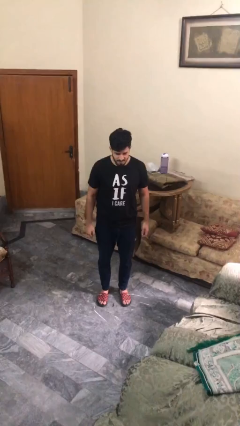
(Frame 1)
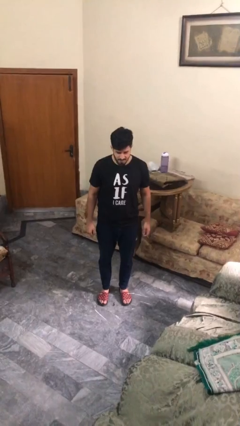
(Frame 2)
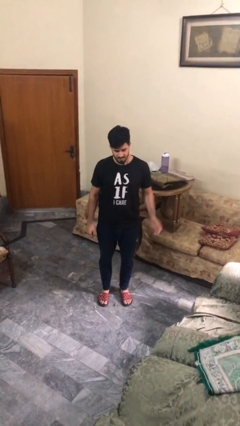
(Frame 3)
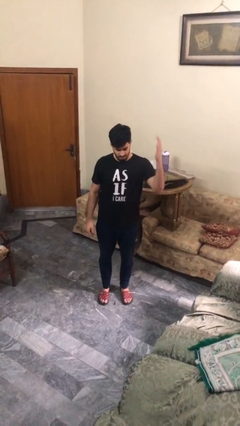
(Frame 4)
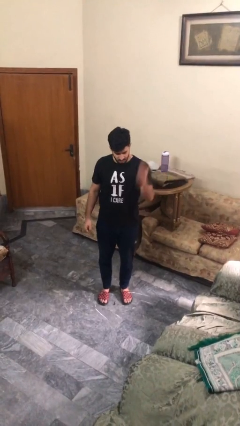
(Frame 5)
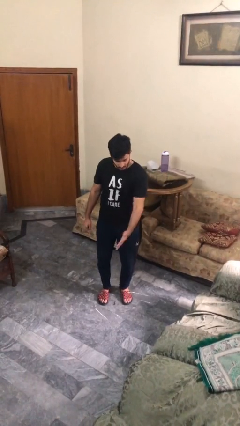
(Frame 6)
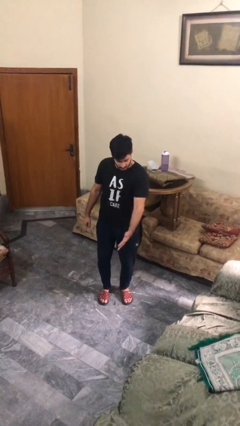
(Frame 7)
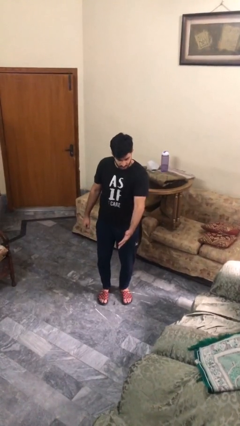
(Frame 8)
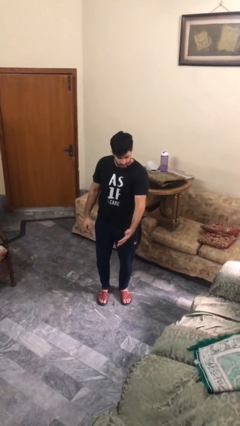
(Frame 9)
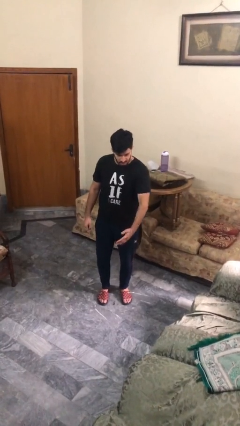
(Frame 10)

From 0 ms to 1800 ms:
person karate chop

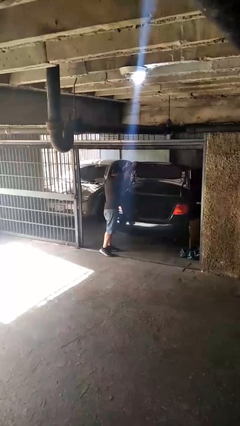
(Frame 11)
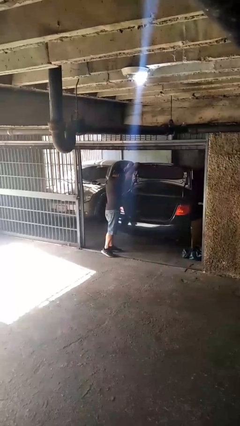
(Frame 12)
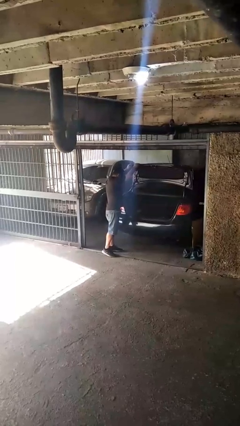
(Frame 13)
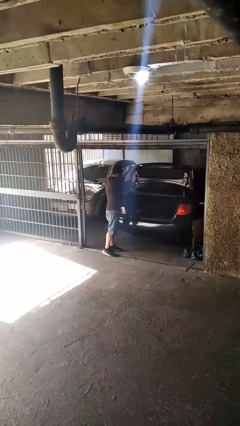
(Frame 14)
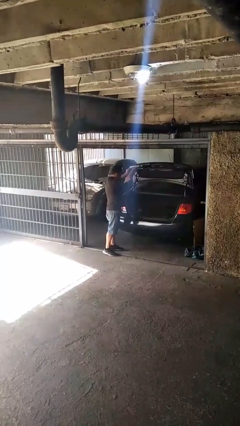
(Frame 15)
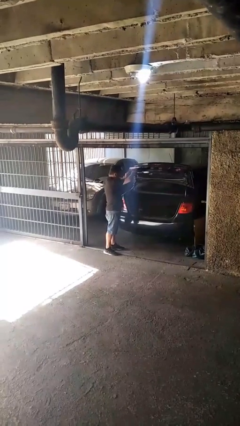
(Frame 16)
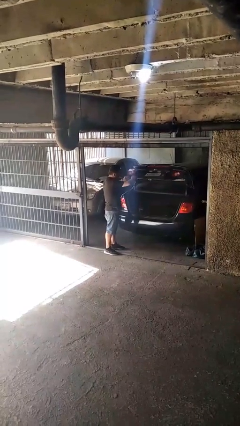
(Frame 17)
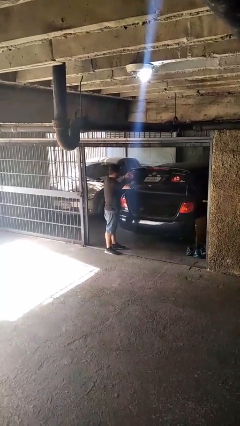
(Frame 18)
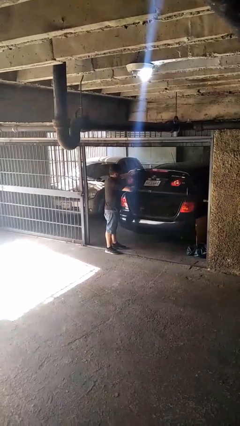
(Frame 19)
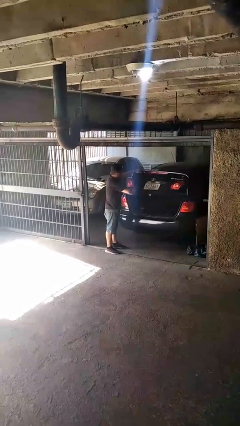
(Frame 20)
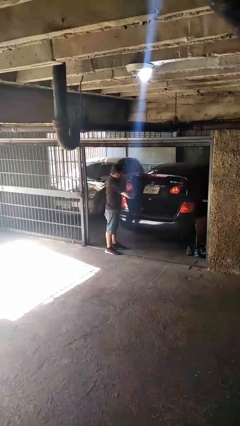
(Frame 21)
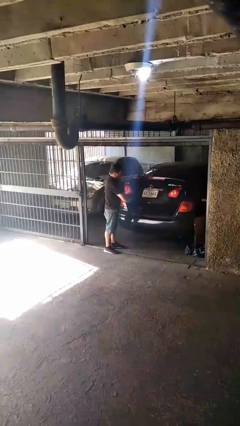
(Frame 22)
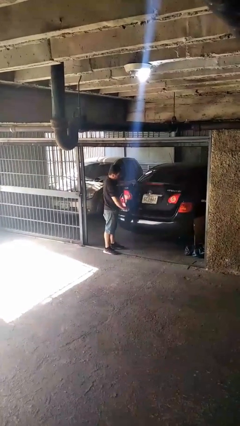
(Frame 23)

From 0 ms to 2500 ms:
person closes car trunk

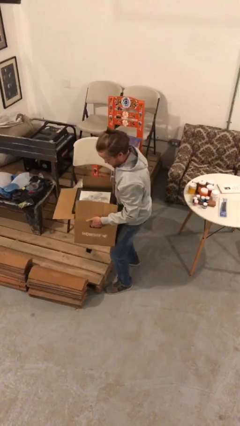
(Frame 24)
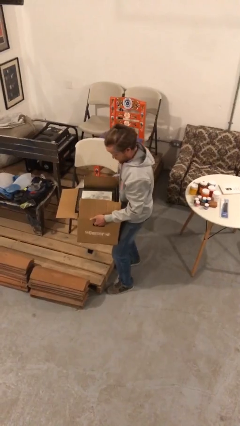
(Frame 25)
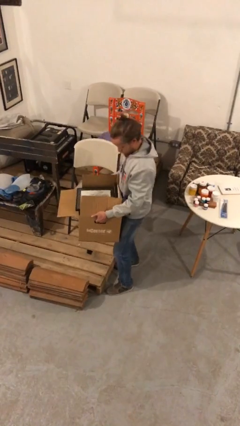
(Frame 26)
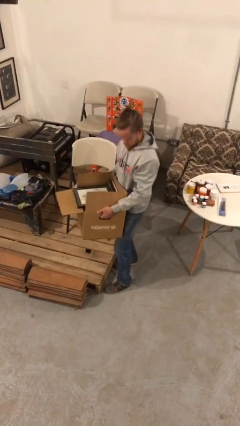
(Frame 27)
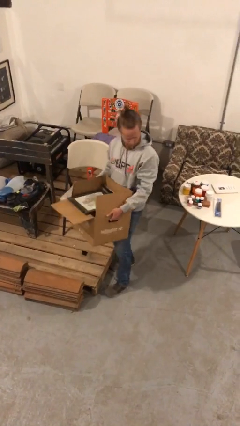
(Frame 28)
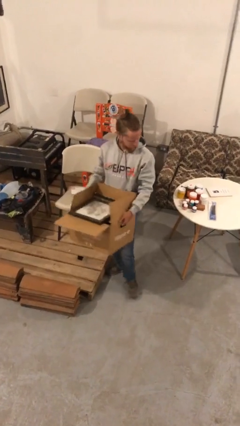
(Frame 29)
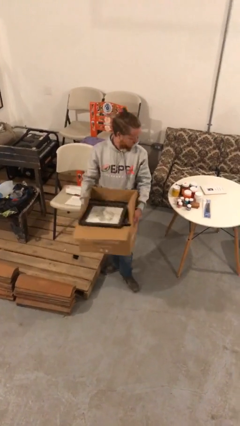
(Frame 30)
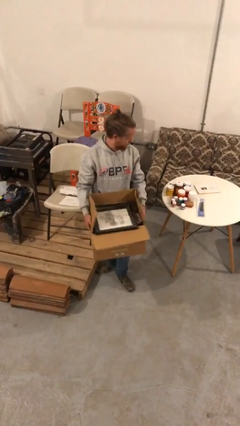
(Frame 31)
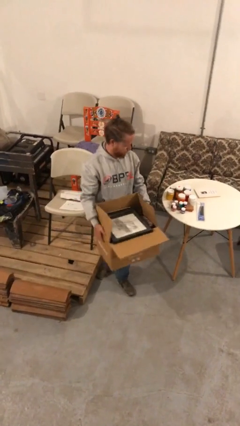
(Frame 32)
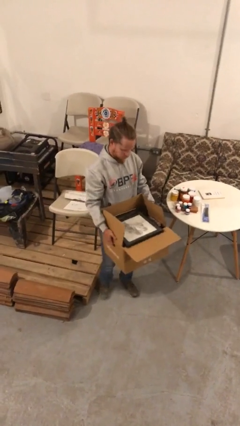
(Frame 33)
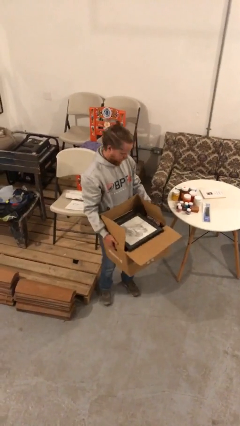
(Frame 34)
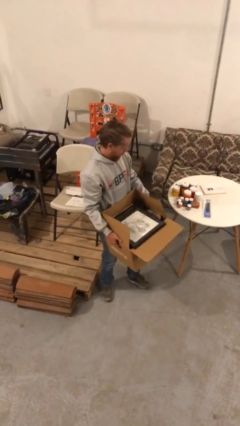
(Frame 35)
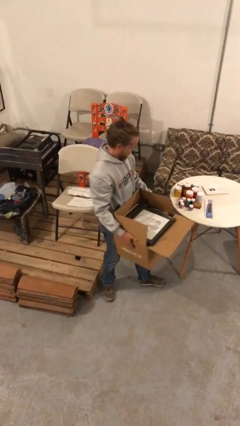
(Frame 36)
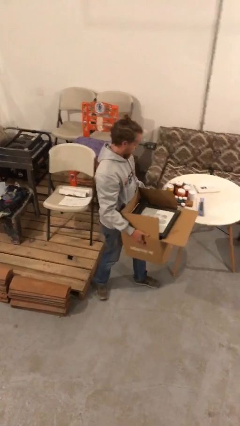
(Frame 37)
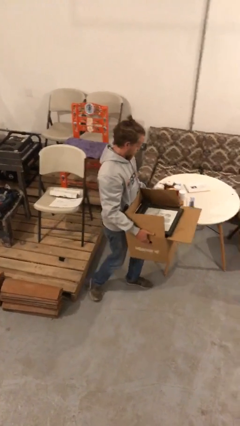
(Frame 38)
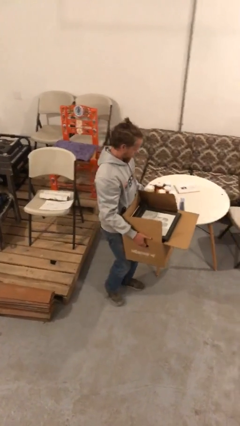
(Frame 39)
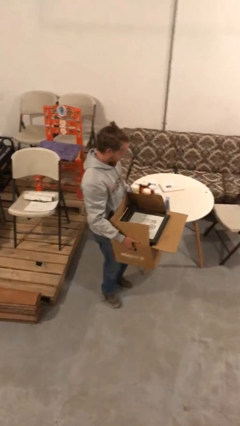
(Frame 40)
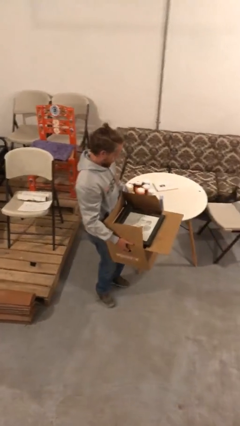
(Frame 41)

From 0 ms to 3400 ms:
person carries heavy object

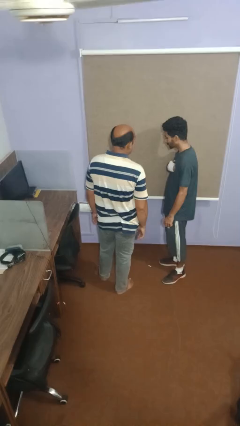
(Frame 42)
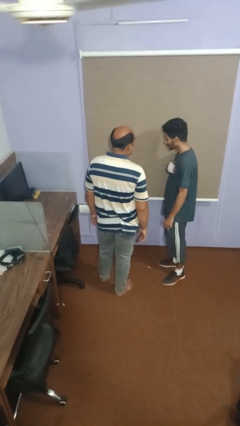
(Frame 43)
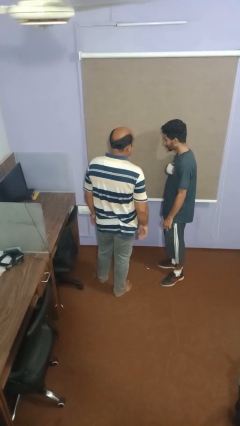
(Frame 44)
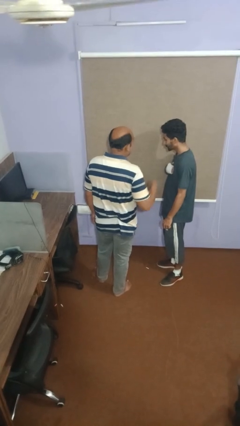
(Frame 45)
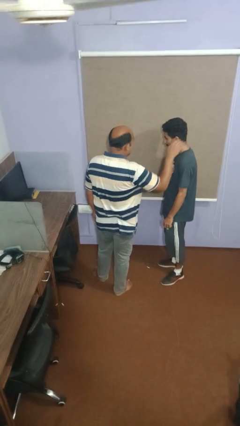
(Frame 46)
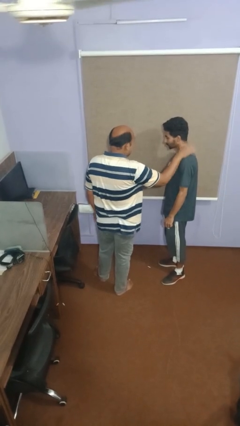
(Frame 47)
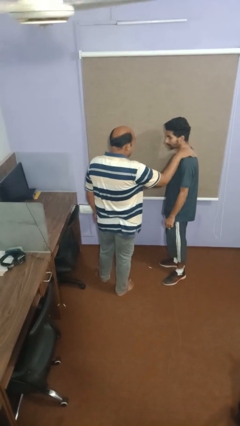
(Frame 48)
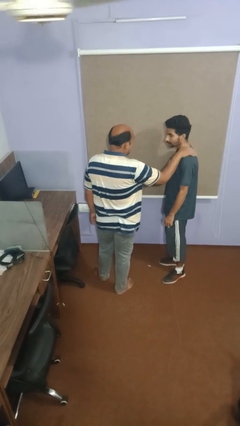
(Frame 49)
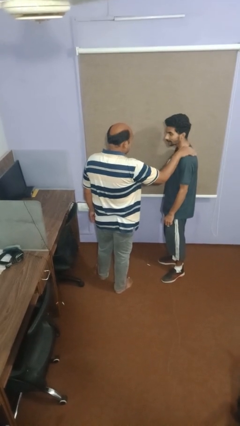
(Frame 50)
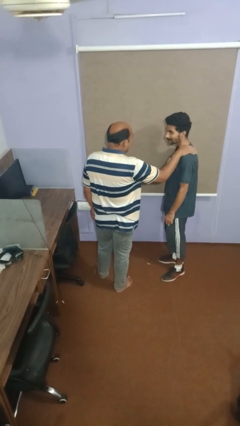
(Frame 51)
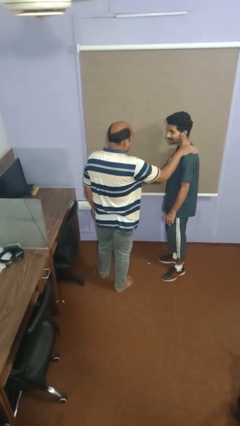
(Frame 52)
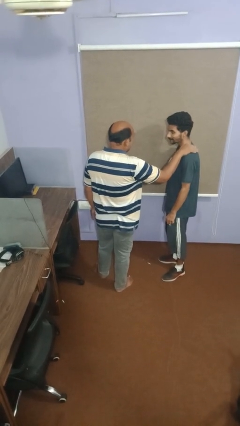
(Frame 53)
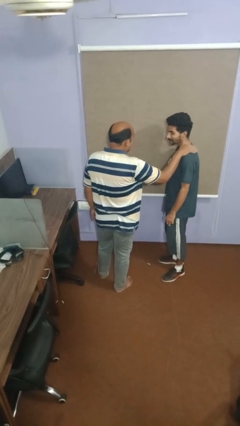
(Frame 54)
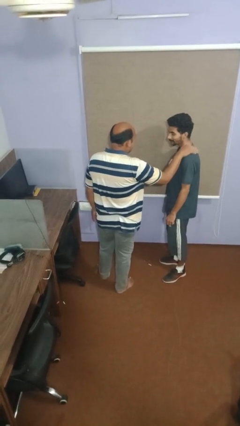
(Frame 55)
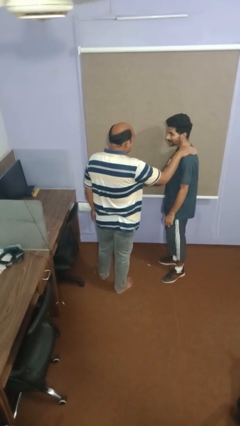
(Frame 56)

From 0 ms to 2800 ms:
person pounds shoulders of person

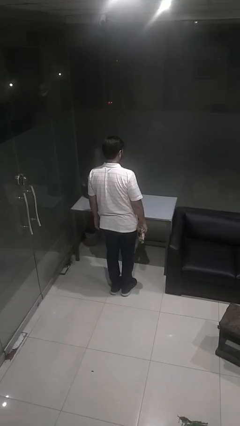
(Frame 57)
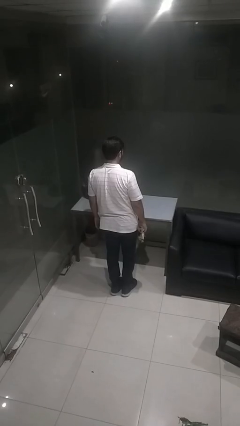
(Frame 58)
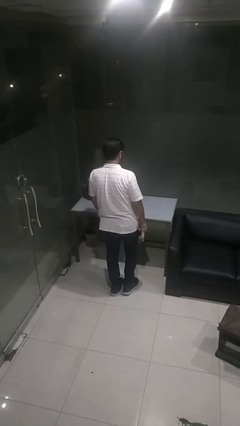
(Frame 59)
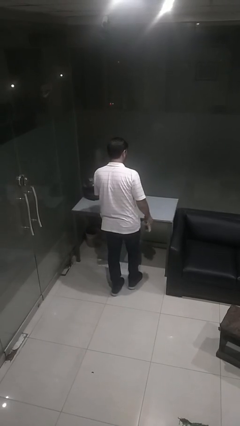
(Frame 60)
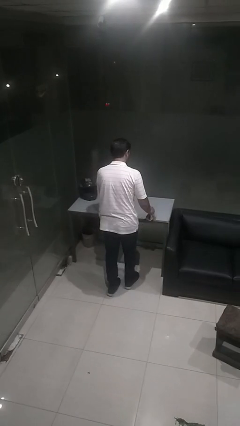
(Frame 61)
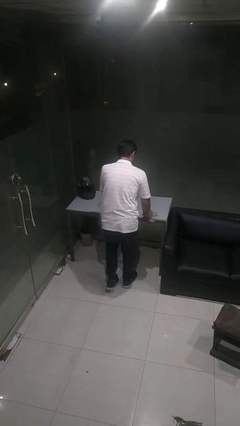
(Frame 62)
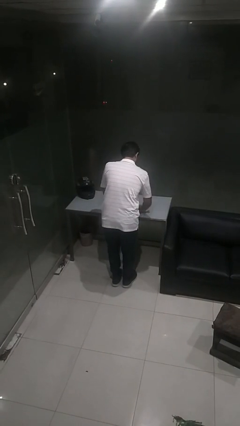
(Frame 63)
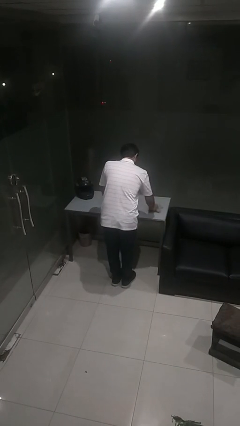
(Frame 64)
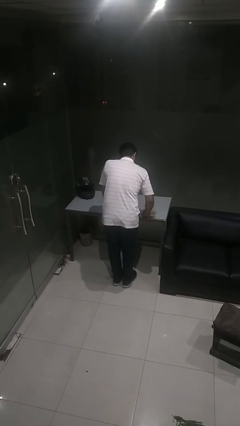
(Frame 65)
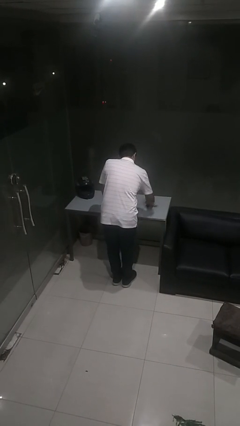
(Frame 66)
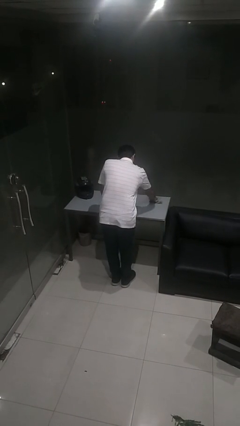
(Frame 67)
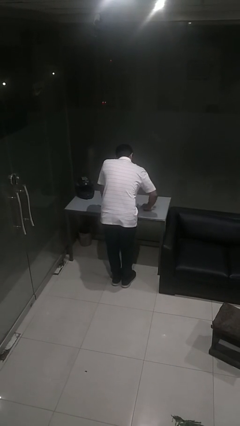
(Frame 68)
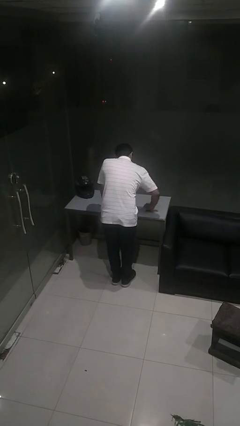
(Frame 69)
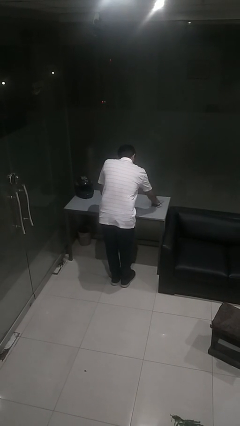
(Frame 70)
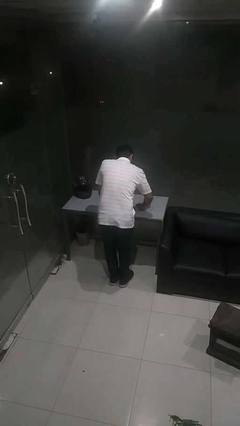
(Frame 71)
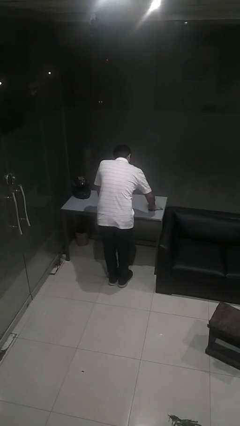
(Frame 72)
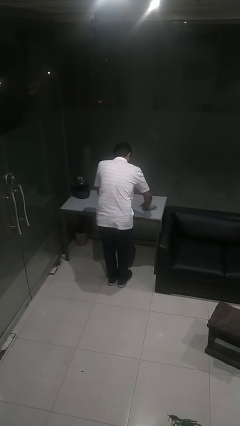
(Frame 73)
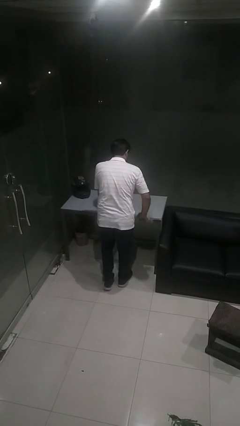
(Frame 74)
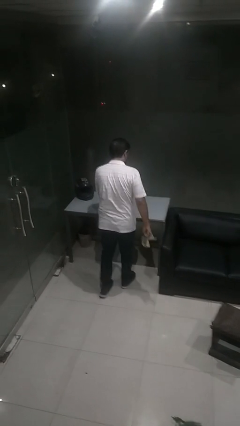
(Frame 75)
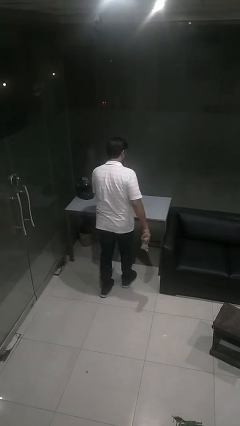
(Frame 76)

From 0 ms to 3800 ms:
person cleans table with rag

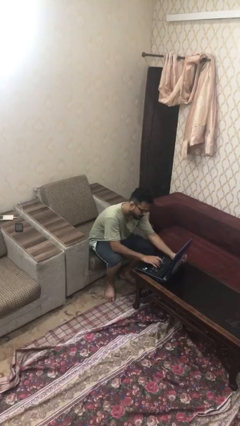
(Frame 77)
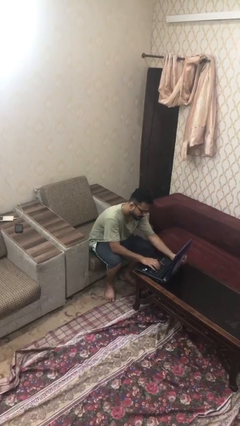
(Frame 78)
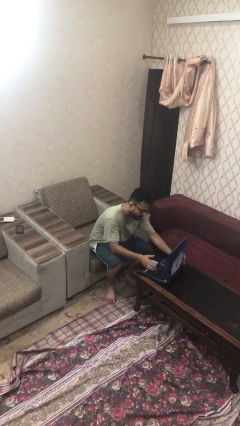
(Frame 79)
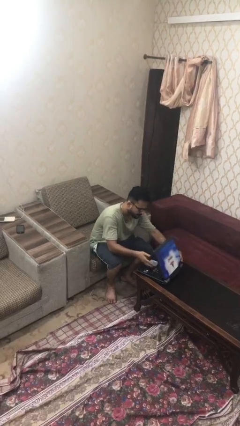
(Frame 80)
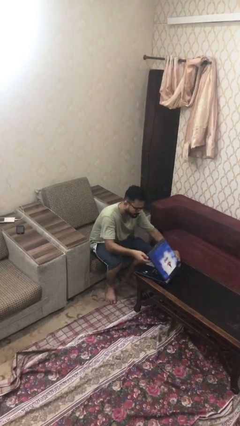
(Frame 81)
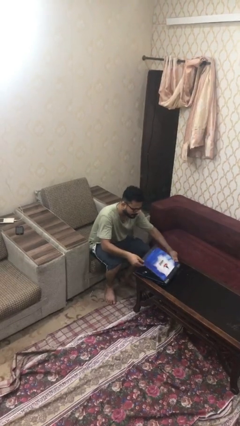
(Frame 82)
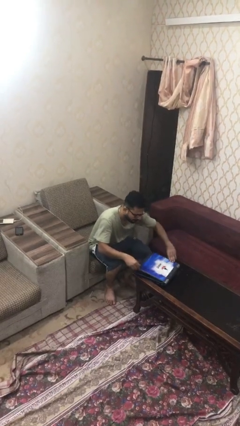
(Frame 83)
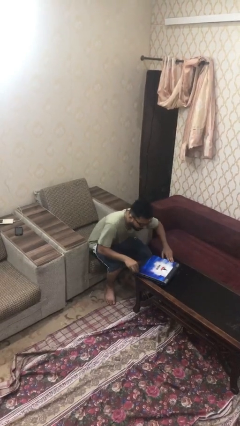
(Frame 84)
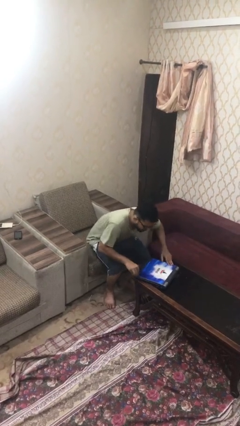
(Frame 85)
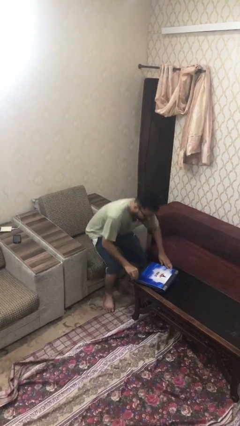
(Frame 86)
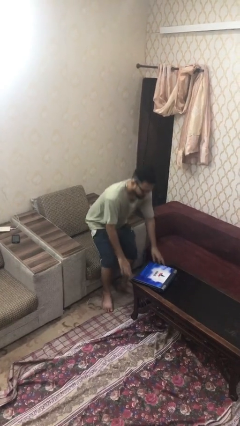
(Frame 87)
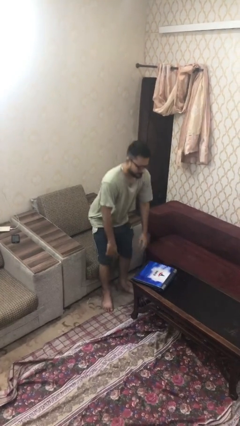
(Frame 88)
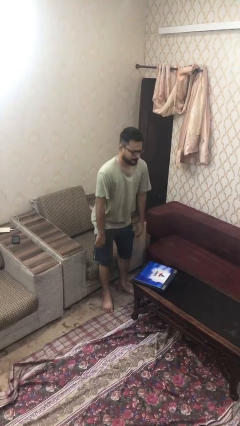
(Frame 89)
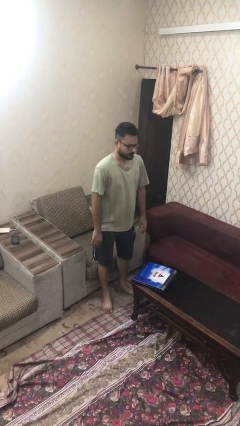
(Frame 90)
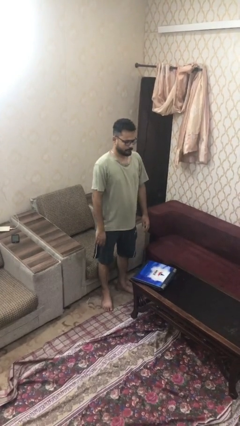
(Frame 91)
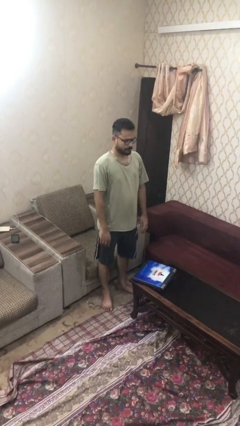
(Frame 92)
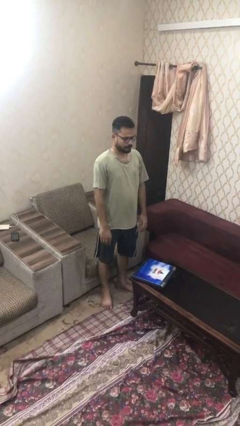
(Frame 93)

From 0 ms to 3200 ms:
person stands up

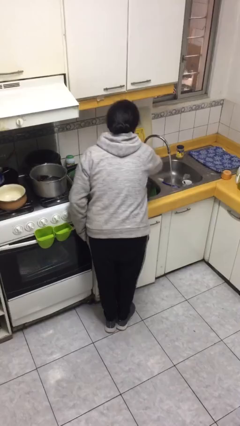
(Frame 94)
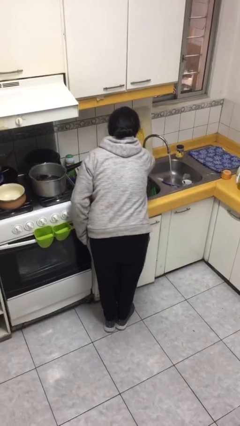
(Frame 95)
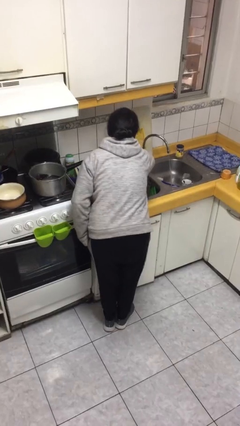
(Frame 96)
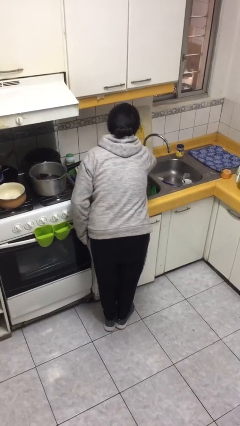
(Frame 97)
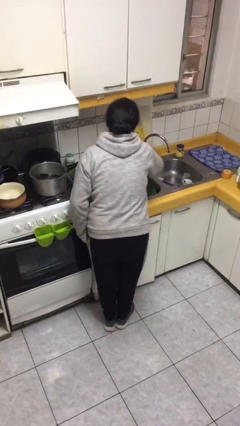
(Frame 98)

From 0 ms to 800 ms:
person turns off faucet
